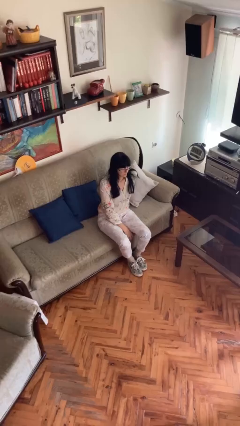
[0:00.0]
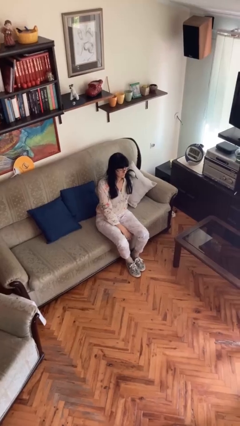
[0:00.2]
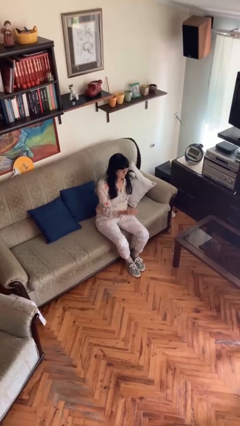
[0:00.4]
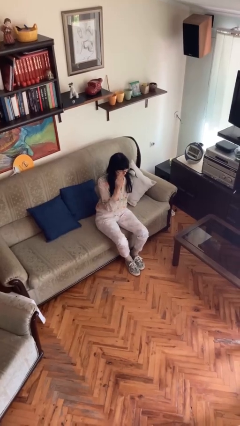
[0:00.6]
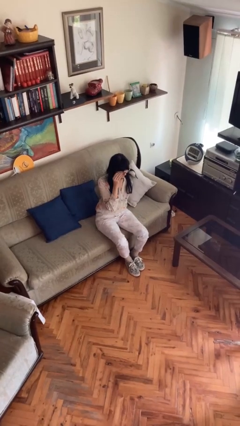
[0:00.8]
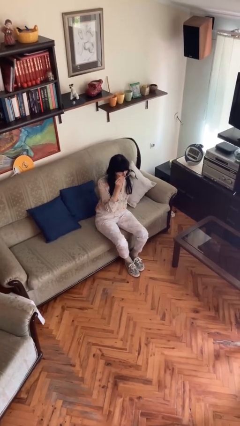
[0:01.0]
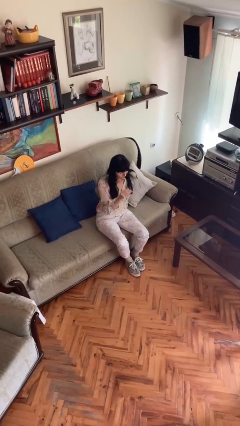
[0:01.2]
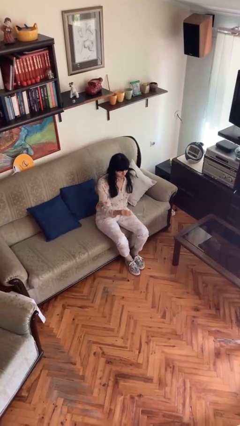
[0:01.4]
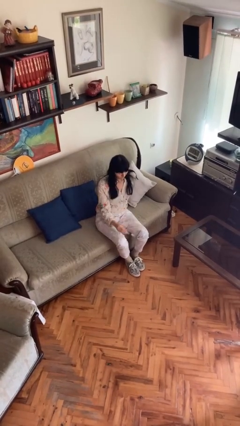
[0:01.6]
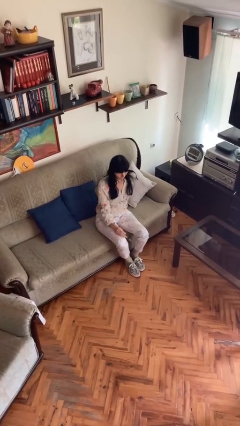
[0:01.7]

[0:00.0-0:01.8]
person takes off glasses

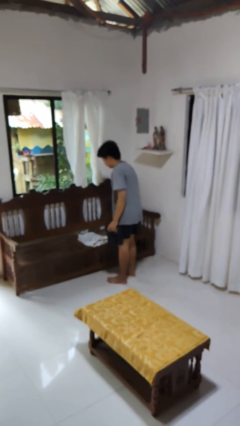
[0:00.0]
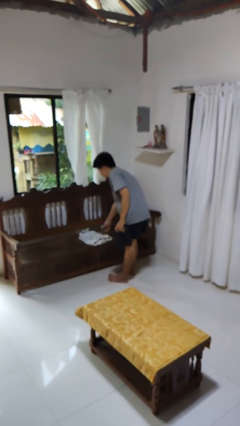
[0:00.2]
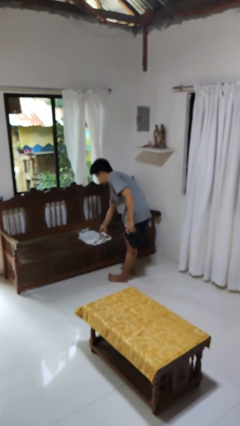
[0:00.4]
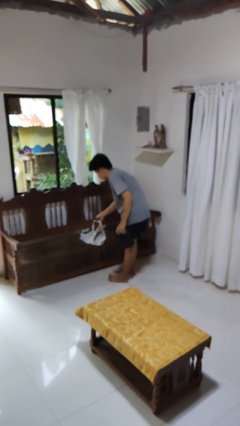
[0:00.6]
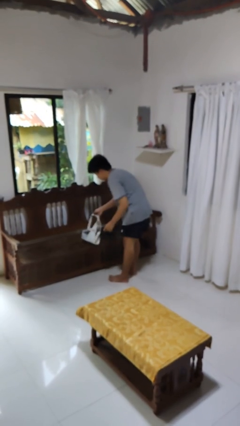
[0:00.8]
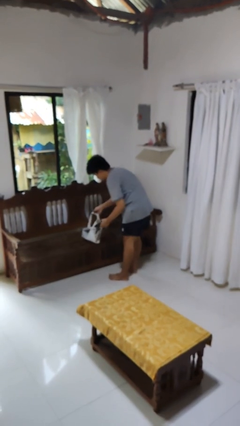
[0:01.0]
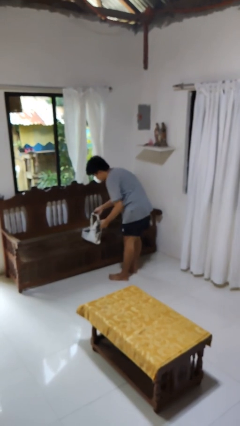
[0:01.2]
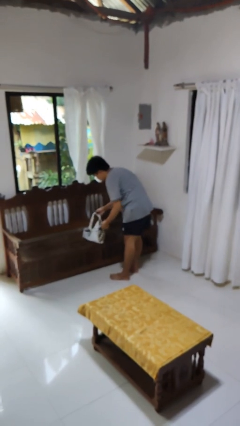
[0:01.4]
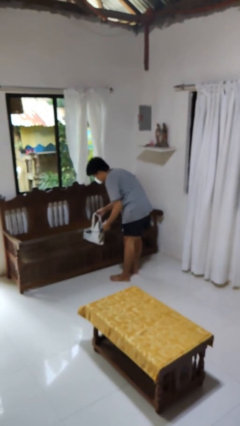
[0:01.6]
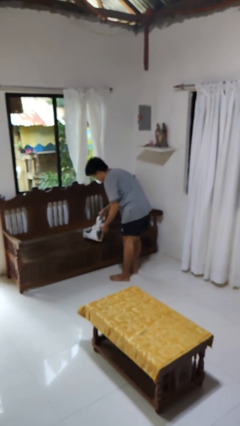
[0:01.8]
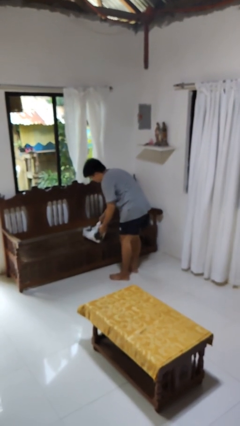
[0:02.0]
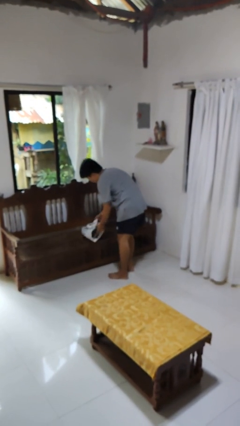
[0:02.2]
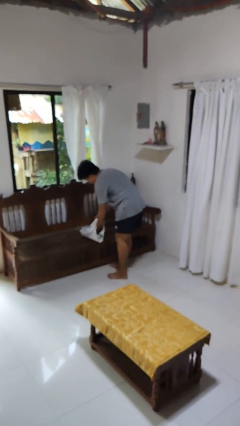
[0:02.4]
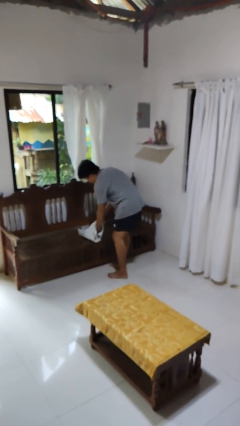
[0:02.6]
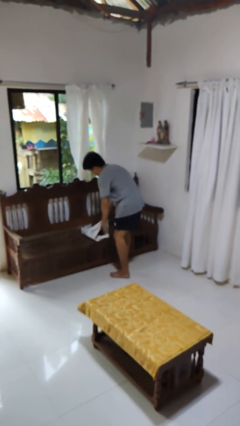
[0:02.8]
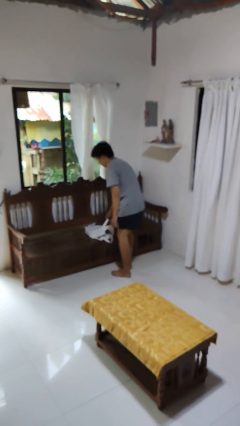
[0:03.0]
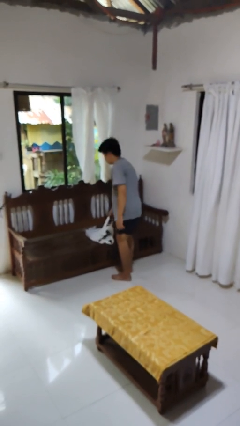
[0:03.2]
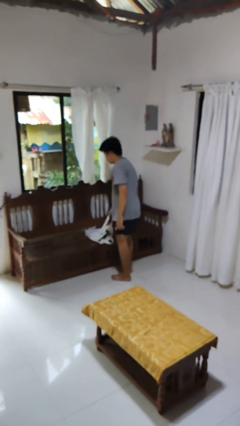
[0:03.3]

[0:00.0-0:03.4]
person puts object into bag

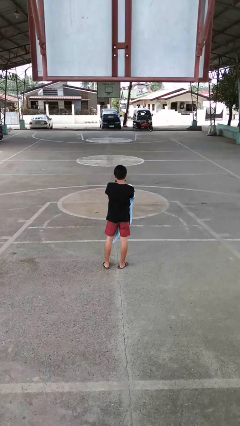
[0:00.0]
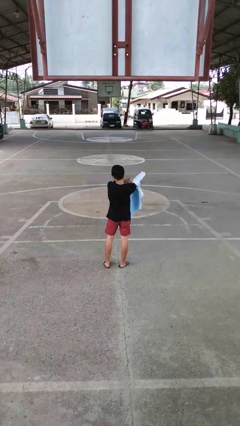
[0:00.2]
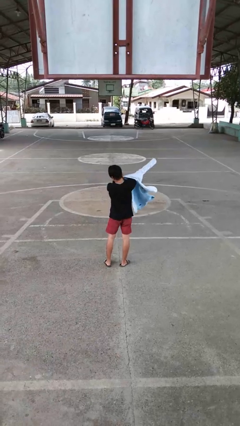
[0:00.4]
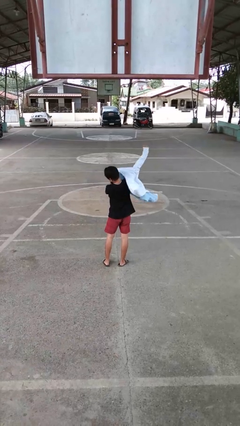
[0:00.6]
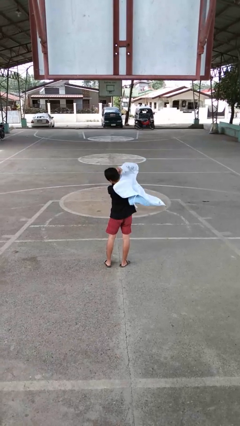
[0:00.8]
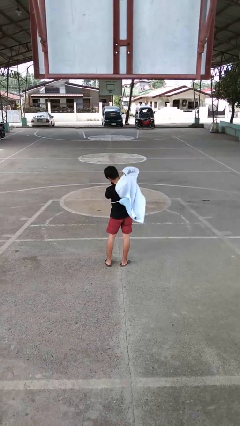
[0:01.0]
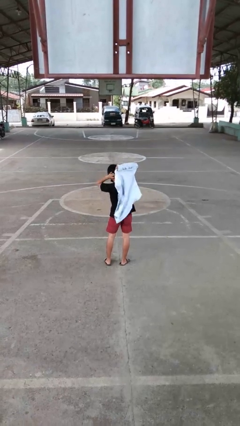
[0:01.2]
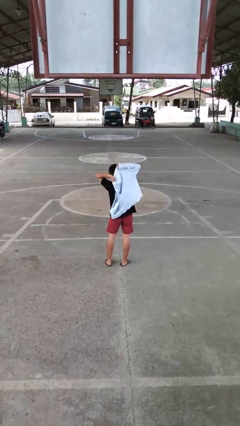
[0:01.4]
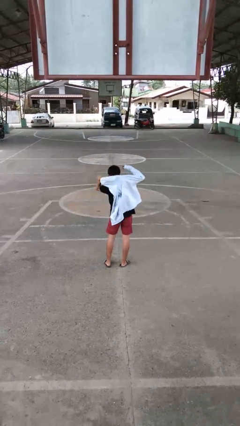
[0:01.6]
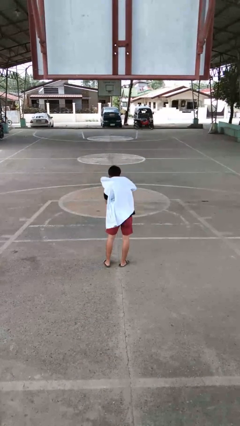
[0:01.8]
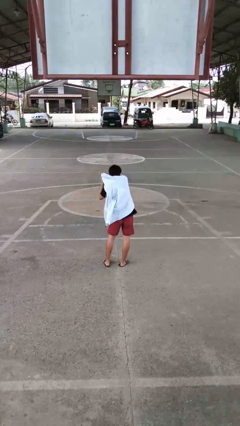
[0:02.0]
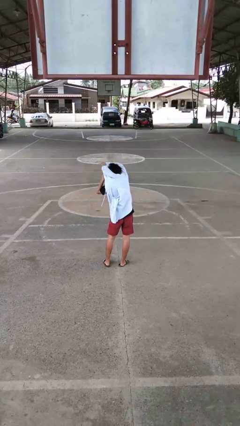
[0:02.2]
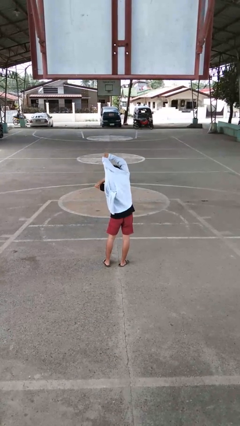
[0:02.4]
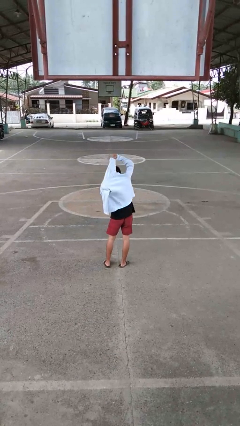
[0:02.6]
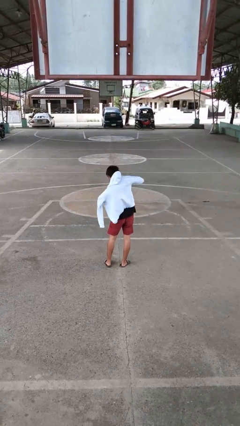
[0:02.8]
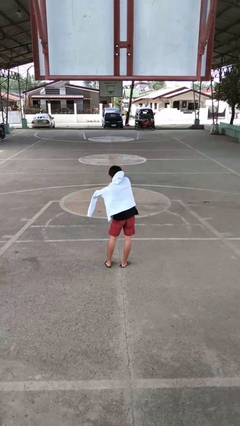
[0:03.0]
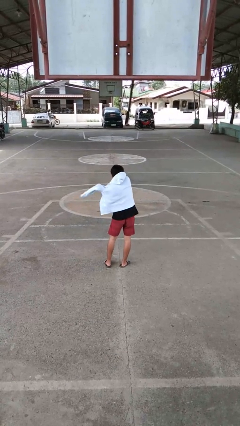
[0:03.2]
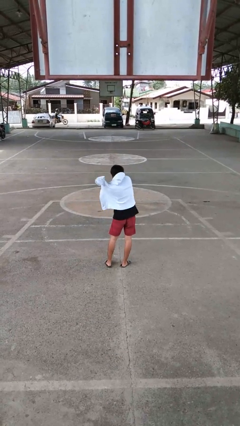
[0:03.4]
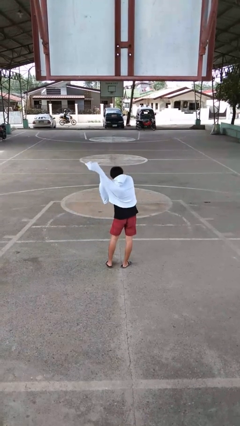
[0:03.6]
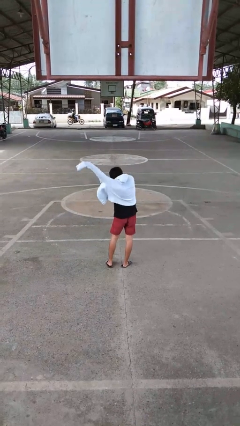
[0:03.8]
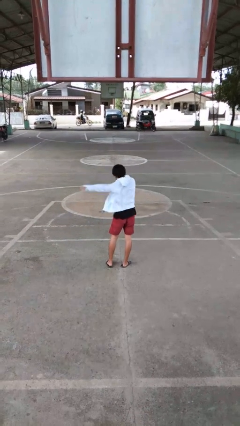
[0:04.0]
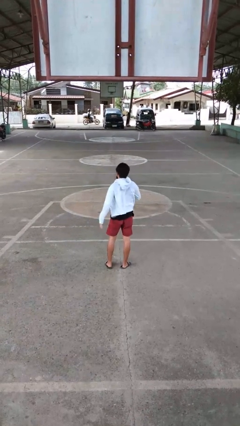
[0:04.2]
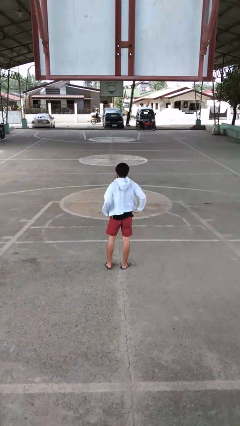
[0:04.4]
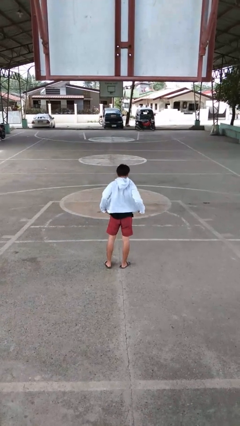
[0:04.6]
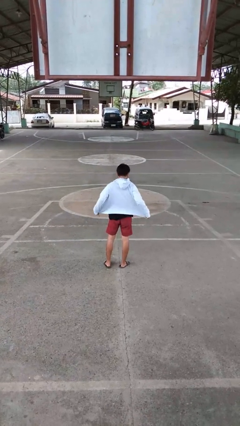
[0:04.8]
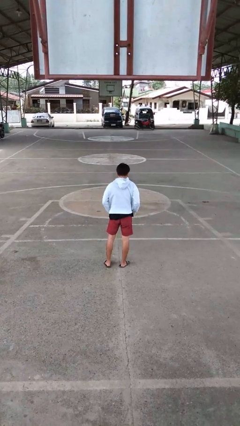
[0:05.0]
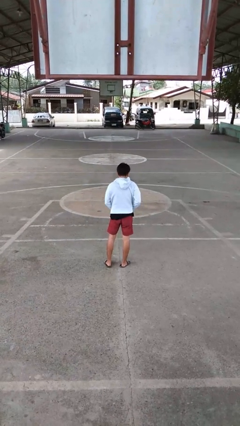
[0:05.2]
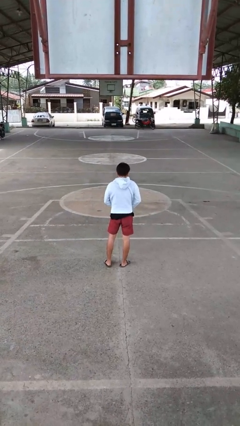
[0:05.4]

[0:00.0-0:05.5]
person puts on jacket

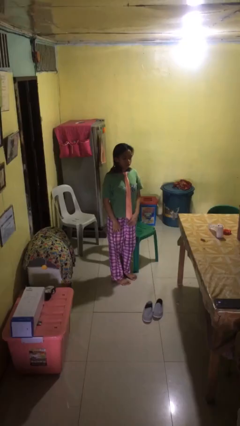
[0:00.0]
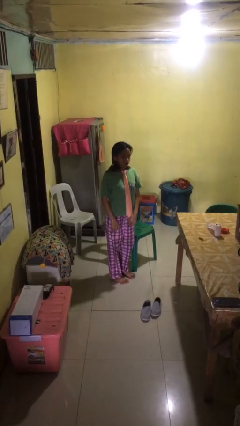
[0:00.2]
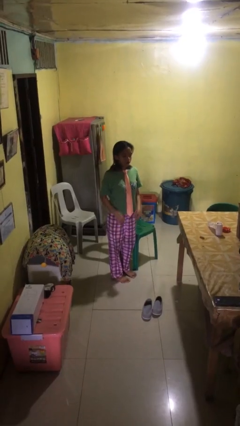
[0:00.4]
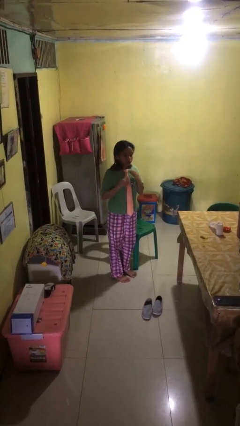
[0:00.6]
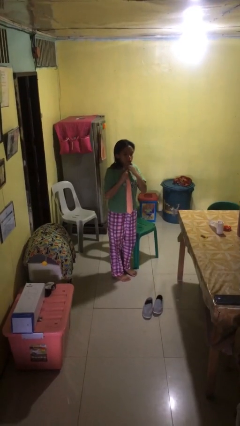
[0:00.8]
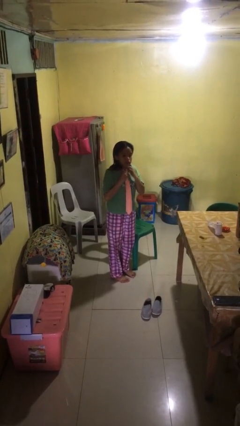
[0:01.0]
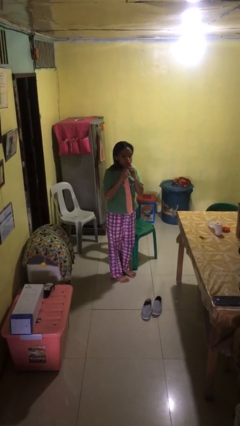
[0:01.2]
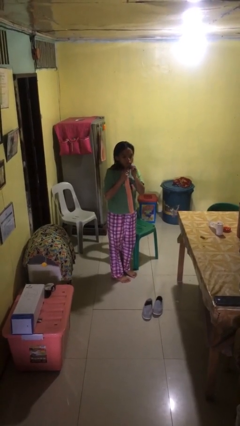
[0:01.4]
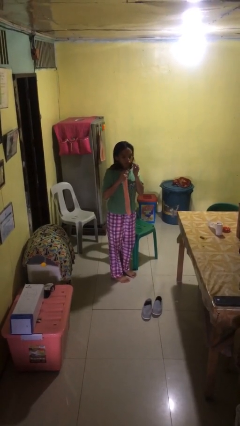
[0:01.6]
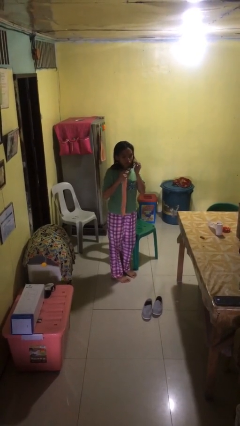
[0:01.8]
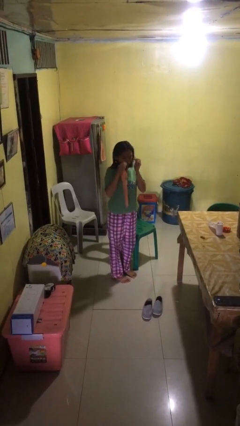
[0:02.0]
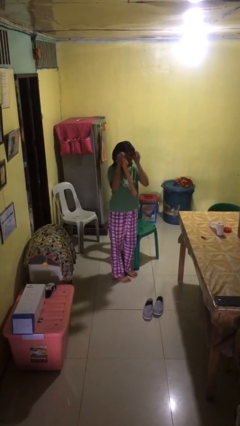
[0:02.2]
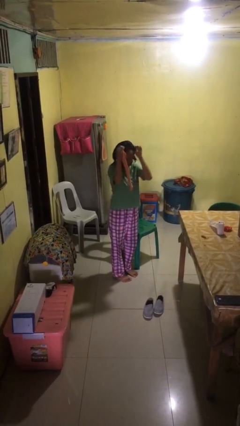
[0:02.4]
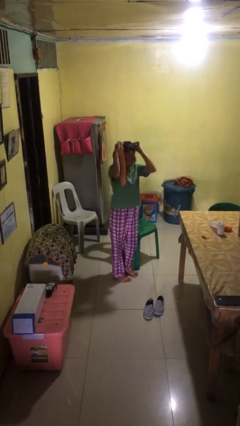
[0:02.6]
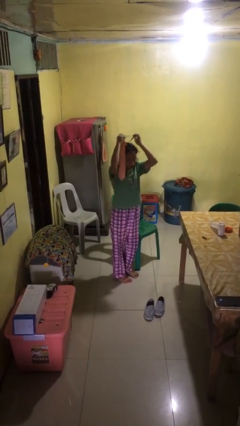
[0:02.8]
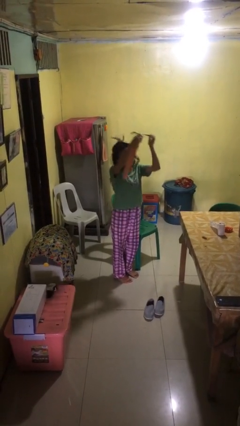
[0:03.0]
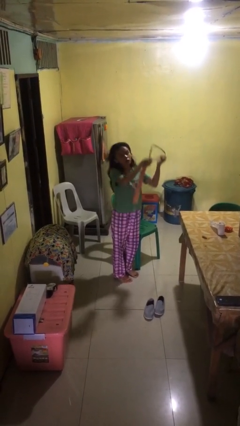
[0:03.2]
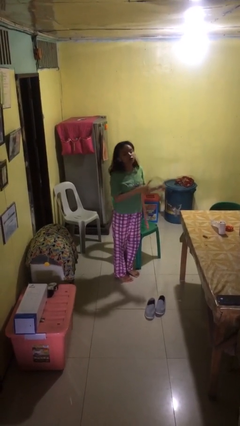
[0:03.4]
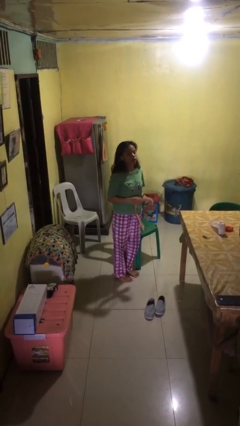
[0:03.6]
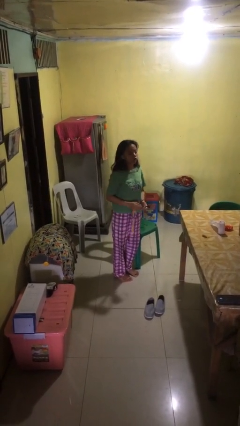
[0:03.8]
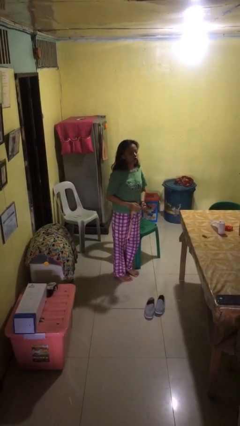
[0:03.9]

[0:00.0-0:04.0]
person takes off necktie

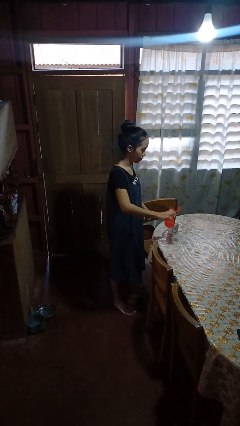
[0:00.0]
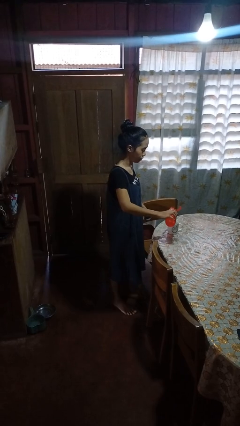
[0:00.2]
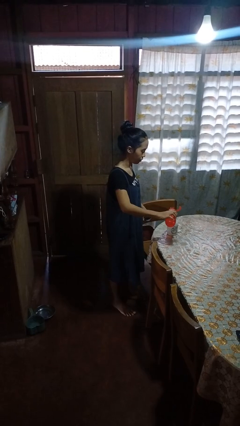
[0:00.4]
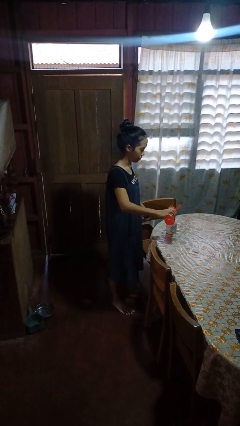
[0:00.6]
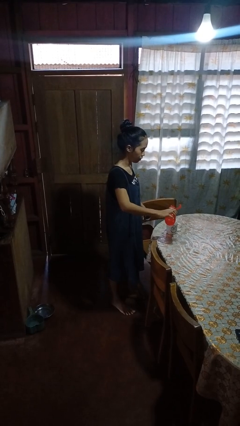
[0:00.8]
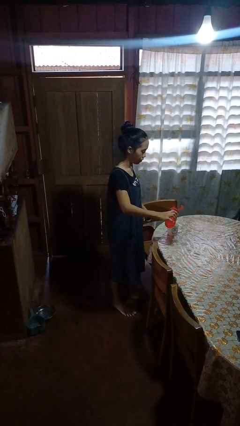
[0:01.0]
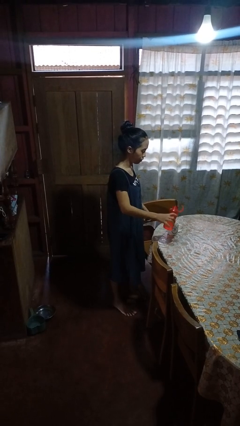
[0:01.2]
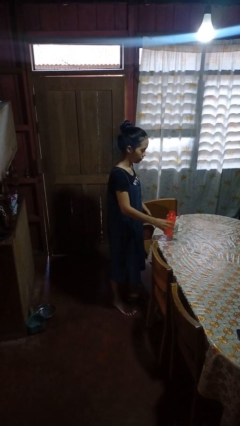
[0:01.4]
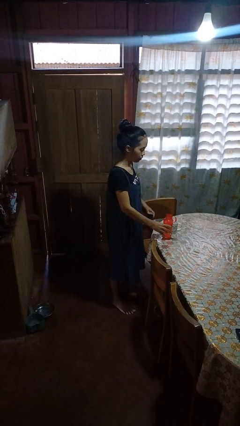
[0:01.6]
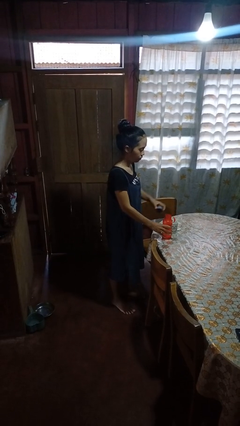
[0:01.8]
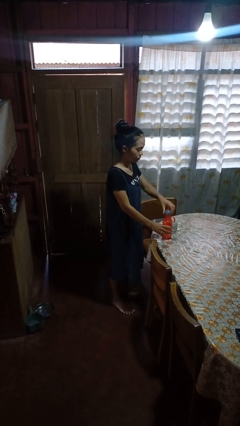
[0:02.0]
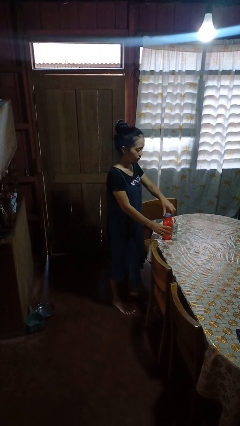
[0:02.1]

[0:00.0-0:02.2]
person pours liquid into cup

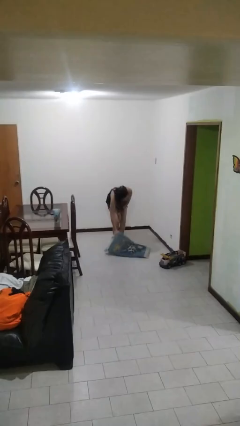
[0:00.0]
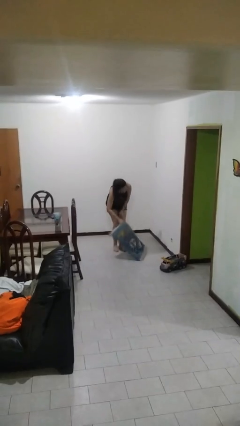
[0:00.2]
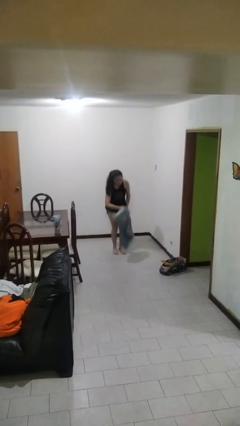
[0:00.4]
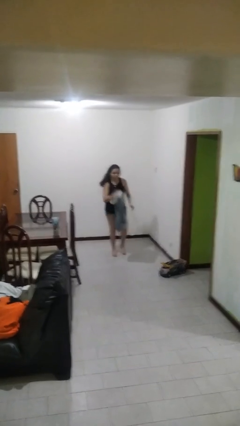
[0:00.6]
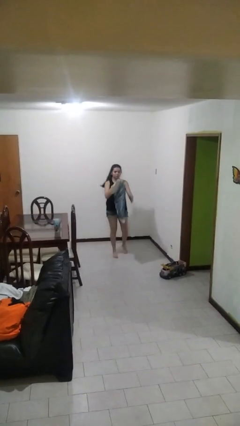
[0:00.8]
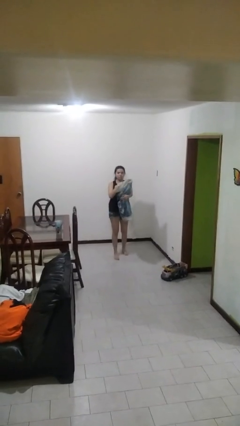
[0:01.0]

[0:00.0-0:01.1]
person picks up object from floor
